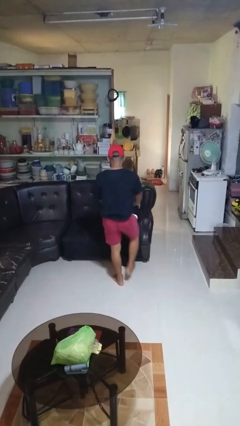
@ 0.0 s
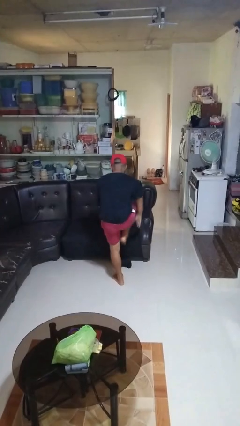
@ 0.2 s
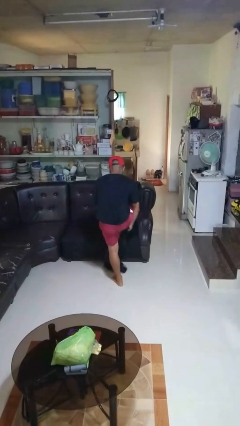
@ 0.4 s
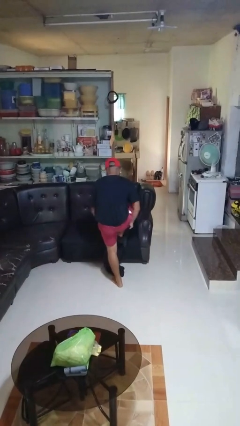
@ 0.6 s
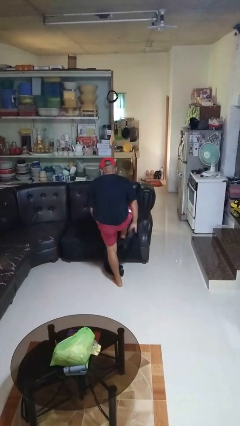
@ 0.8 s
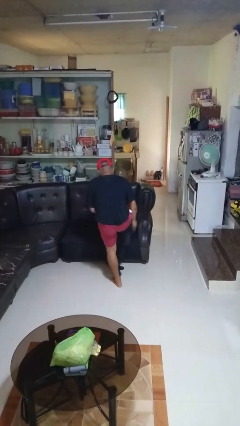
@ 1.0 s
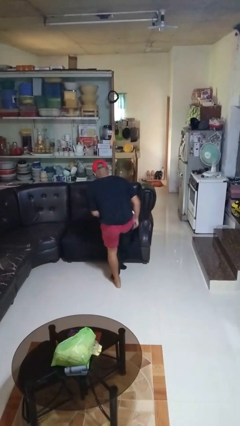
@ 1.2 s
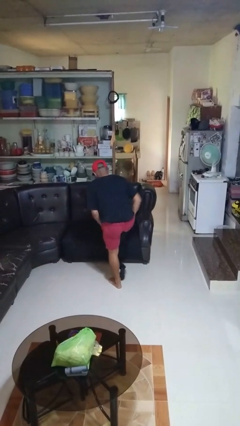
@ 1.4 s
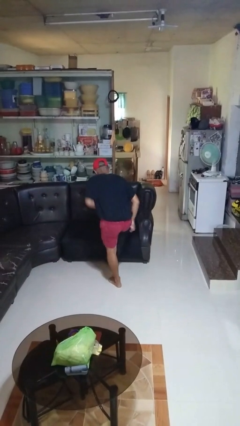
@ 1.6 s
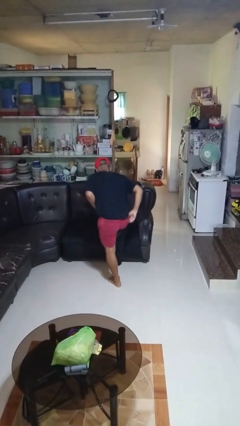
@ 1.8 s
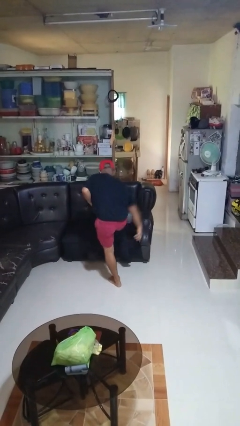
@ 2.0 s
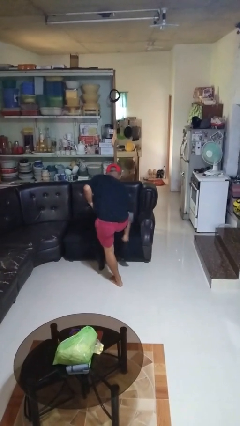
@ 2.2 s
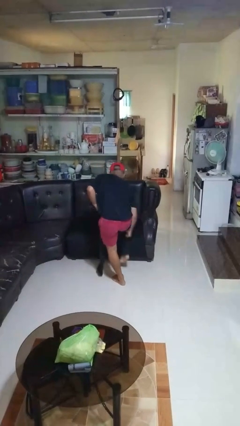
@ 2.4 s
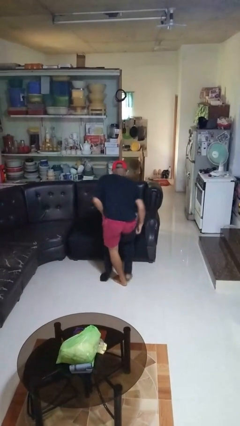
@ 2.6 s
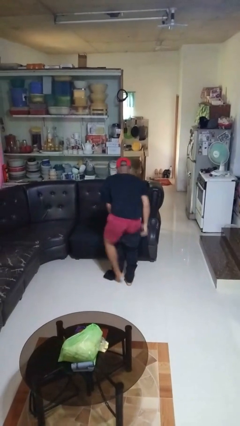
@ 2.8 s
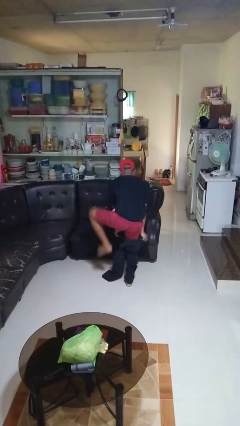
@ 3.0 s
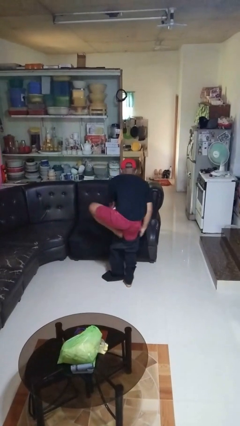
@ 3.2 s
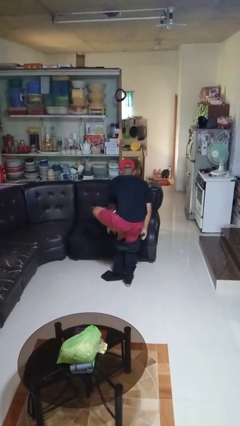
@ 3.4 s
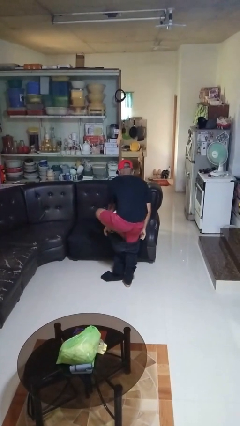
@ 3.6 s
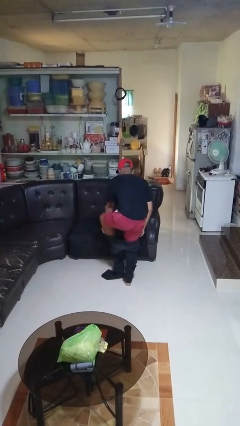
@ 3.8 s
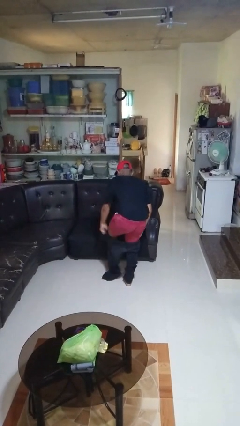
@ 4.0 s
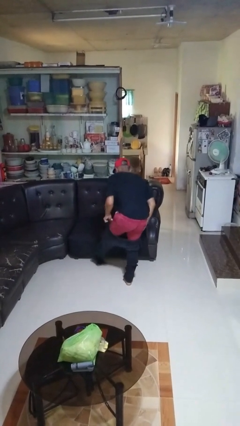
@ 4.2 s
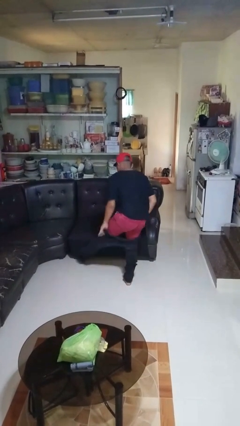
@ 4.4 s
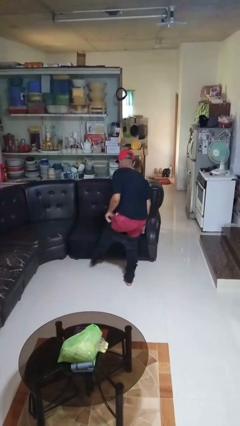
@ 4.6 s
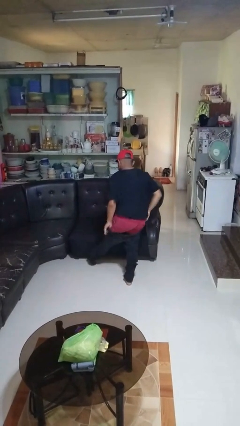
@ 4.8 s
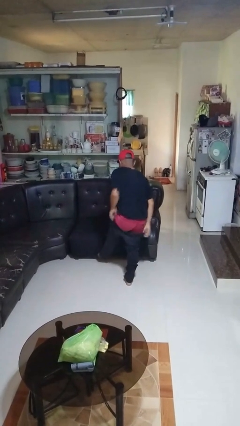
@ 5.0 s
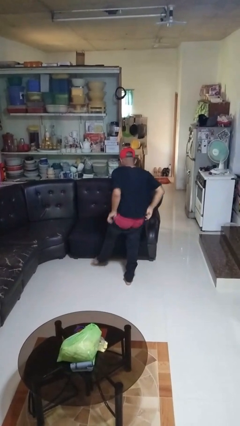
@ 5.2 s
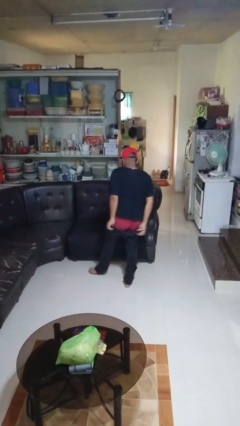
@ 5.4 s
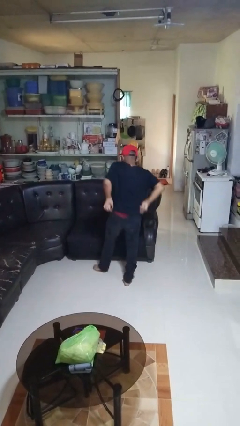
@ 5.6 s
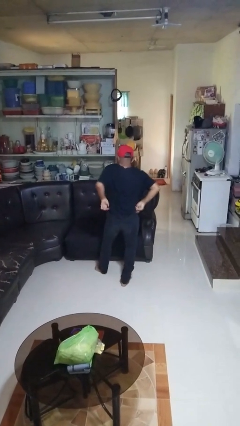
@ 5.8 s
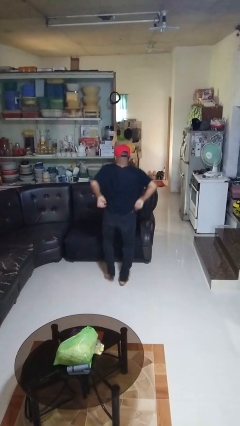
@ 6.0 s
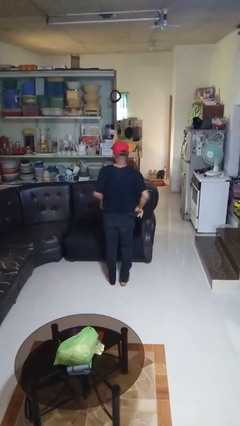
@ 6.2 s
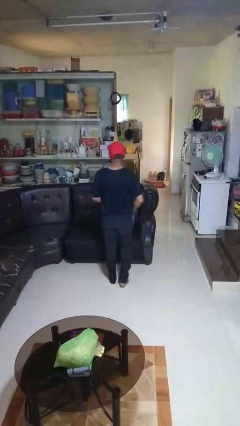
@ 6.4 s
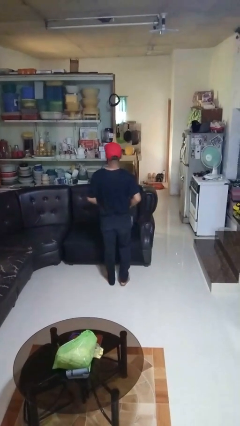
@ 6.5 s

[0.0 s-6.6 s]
person puts on pants

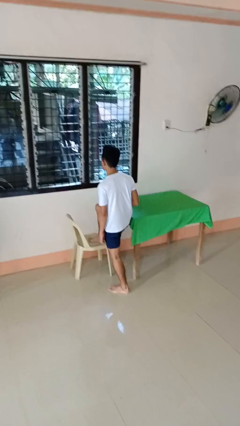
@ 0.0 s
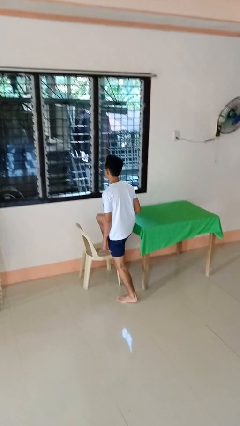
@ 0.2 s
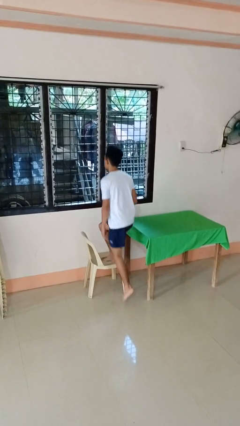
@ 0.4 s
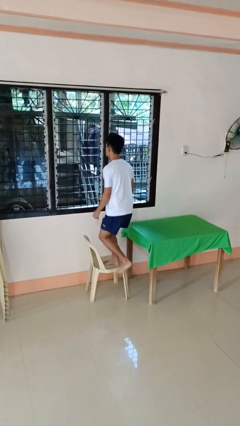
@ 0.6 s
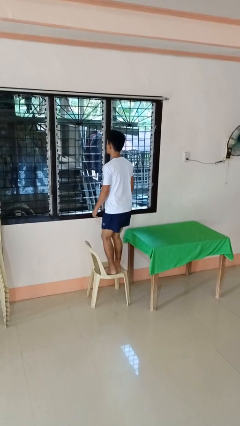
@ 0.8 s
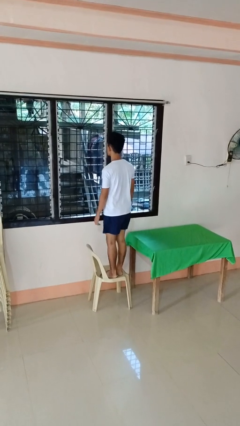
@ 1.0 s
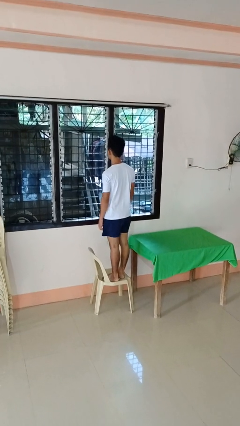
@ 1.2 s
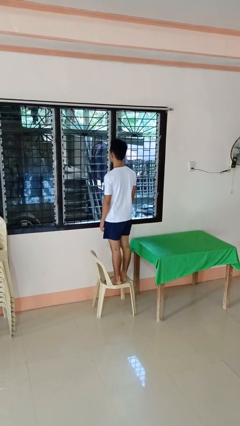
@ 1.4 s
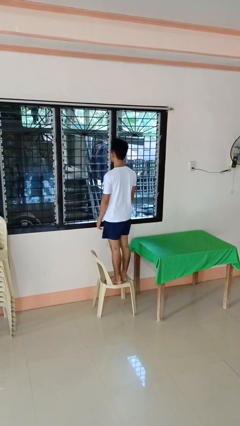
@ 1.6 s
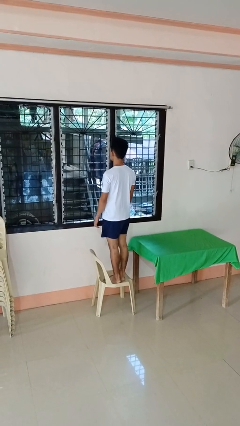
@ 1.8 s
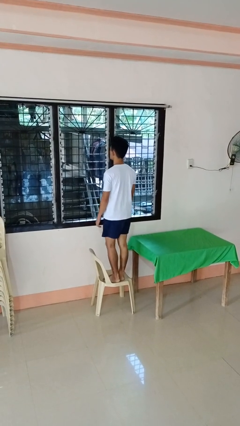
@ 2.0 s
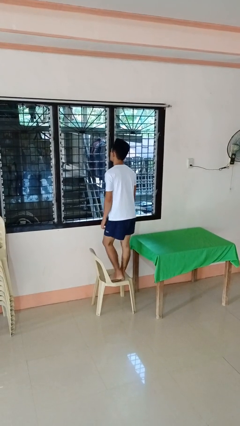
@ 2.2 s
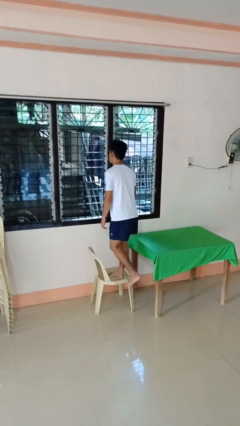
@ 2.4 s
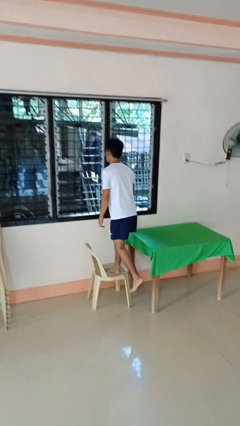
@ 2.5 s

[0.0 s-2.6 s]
person climbs on chair

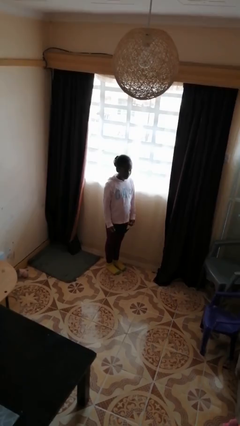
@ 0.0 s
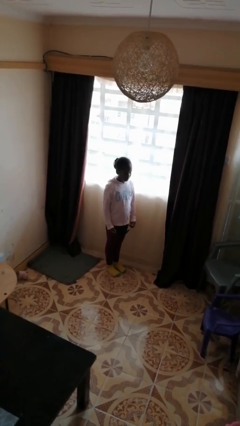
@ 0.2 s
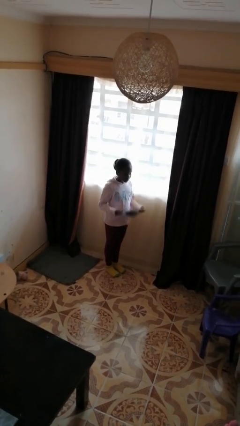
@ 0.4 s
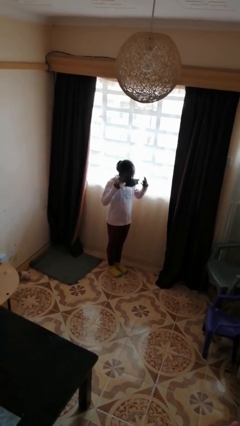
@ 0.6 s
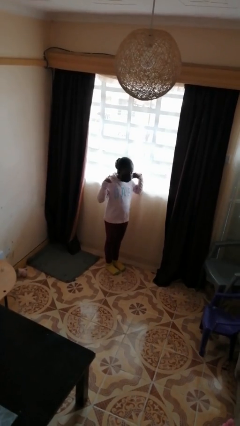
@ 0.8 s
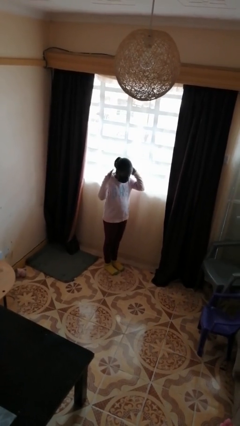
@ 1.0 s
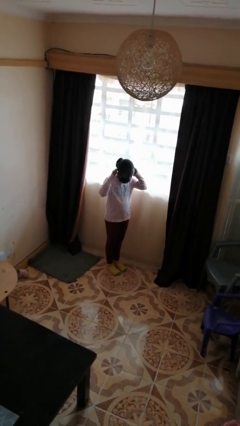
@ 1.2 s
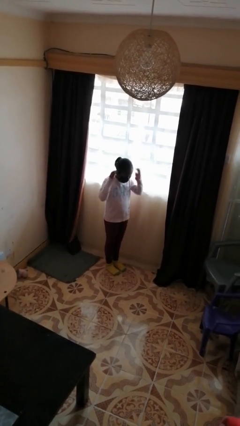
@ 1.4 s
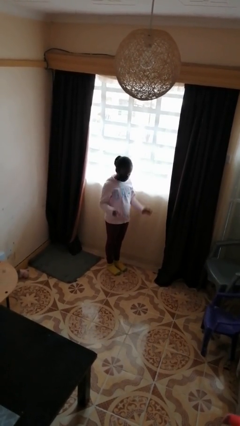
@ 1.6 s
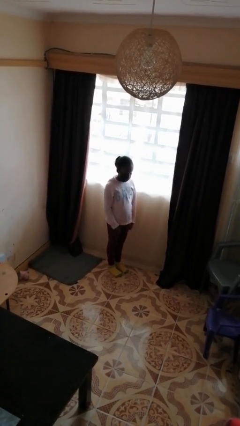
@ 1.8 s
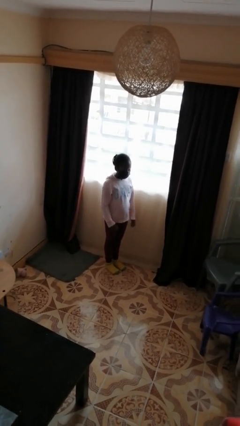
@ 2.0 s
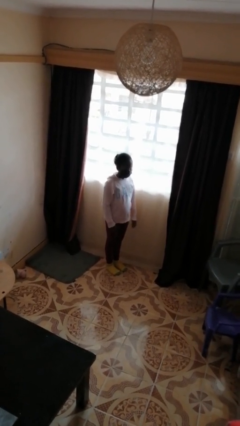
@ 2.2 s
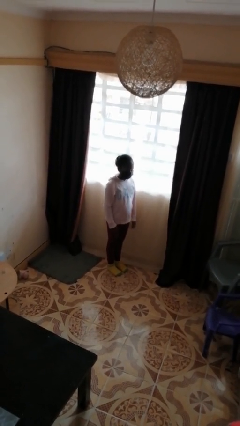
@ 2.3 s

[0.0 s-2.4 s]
person puts on facemask

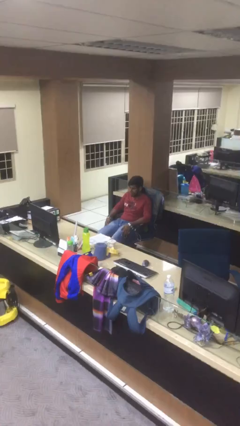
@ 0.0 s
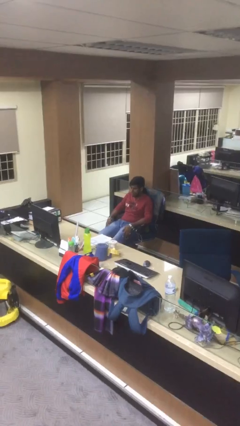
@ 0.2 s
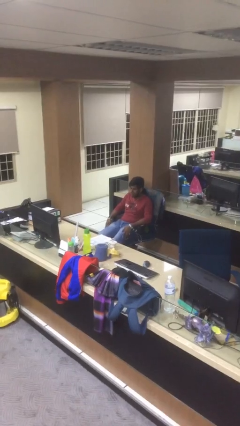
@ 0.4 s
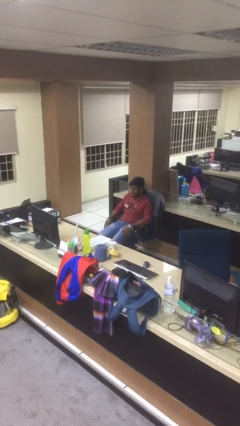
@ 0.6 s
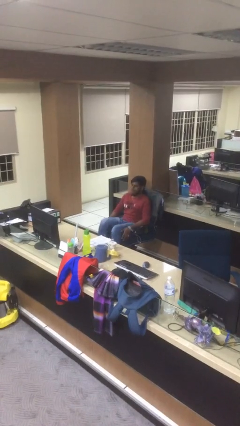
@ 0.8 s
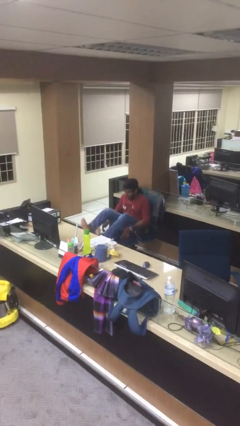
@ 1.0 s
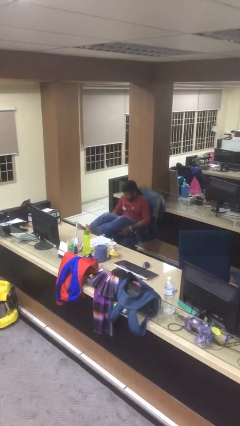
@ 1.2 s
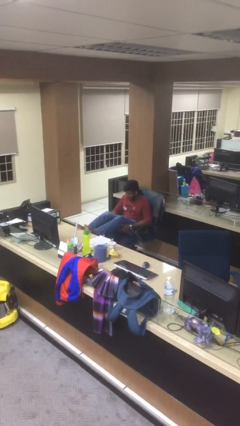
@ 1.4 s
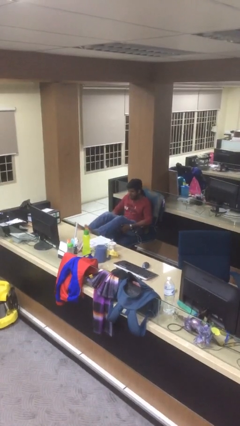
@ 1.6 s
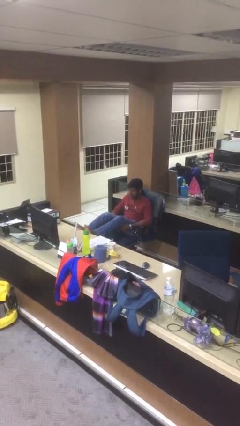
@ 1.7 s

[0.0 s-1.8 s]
person puts feet up

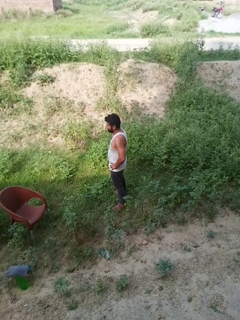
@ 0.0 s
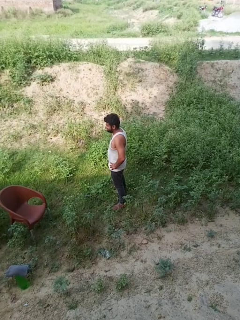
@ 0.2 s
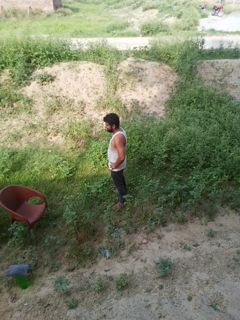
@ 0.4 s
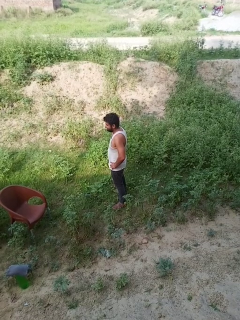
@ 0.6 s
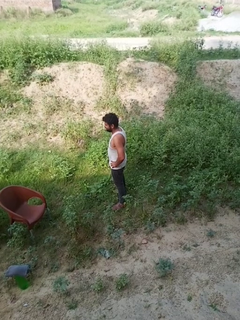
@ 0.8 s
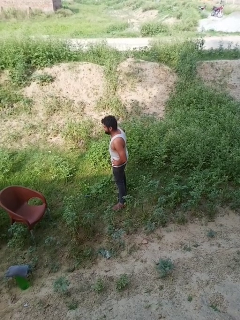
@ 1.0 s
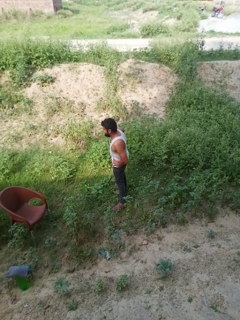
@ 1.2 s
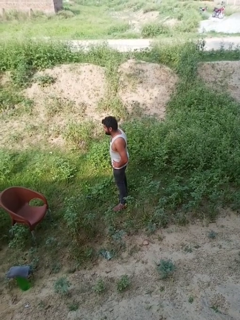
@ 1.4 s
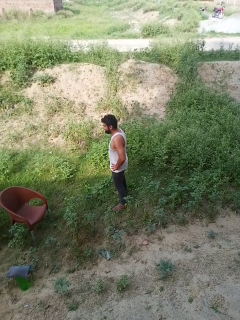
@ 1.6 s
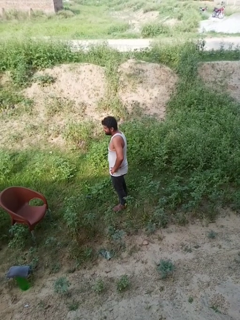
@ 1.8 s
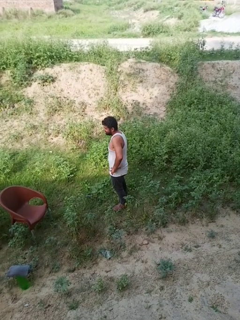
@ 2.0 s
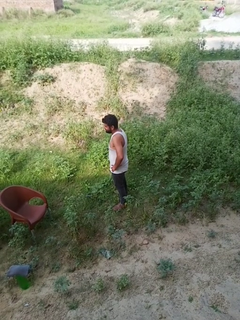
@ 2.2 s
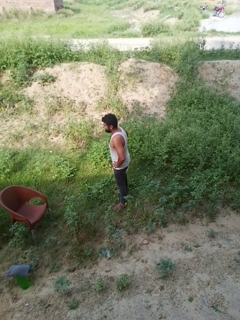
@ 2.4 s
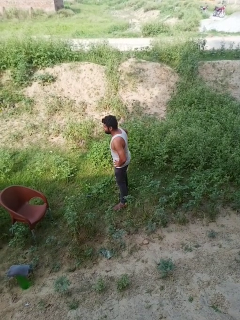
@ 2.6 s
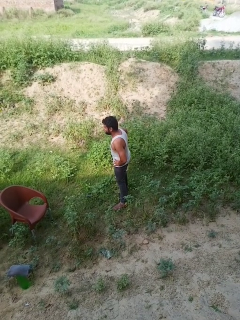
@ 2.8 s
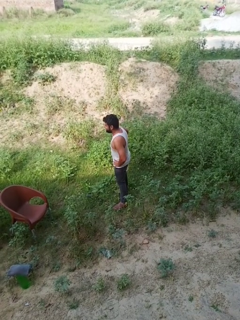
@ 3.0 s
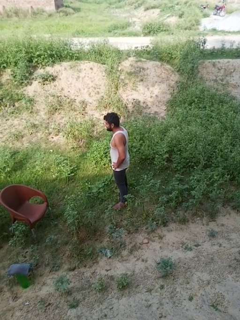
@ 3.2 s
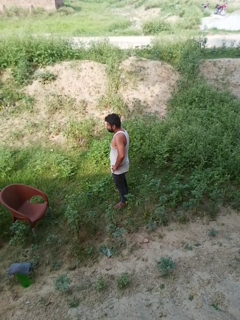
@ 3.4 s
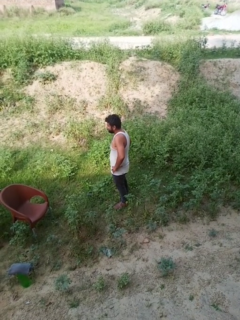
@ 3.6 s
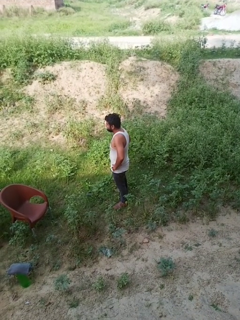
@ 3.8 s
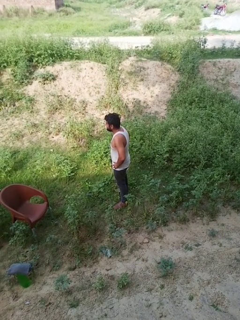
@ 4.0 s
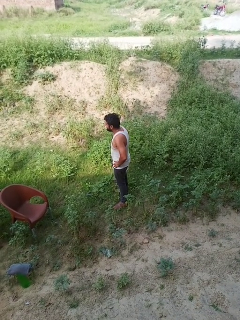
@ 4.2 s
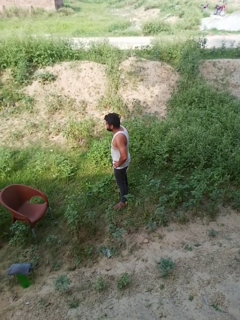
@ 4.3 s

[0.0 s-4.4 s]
person wiggles hips

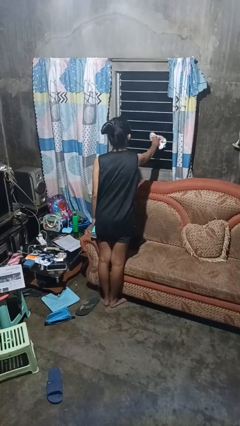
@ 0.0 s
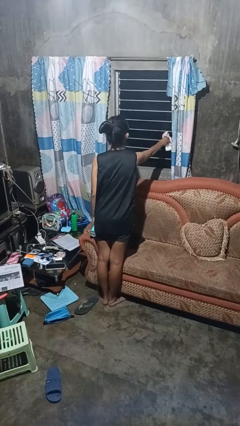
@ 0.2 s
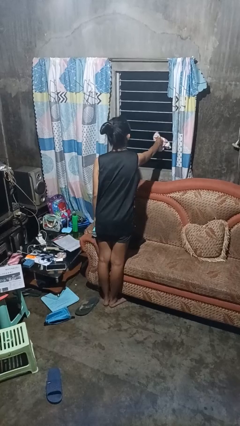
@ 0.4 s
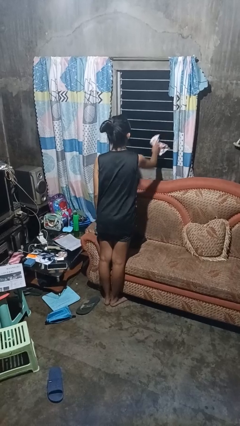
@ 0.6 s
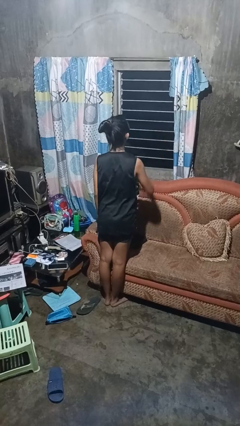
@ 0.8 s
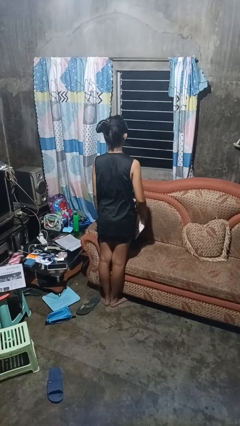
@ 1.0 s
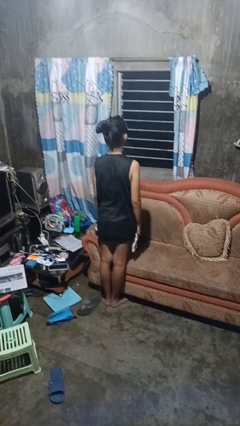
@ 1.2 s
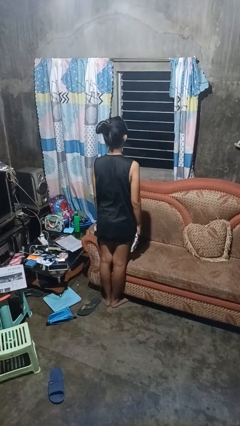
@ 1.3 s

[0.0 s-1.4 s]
person washes window
